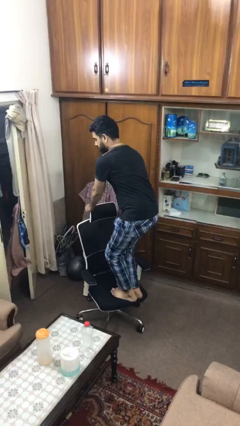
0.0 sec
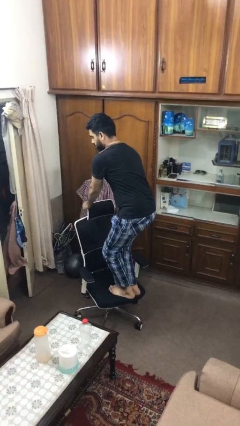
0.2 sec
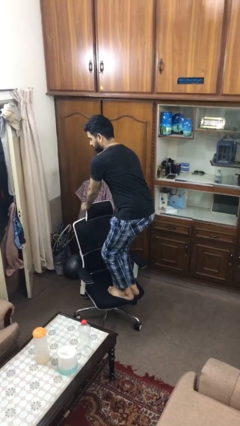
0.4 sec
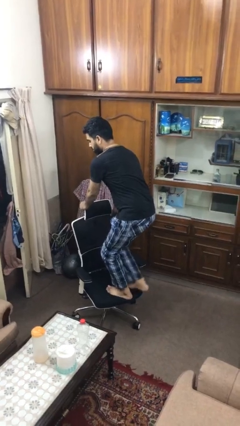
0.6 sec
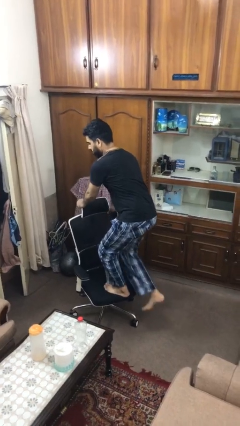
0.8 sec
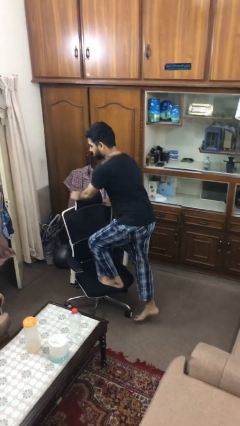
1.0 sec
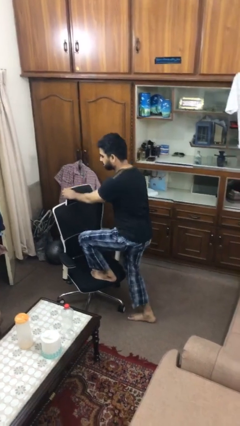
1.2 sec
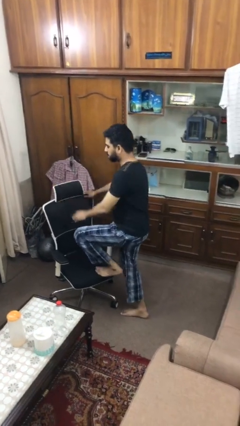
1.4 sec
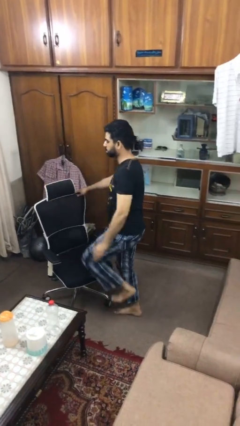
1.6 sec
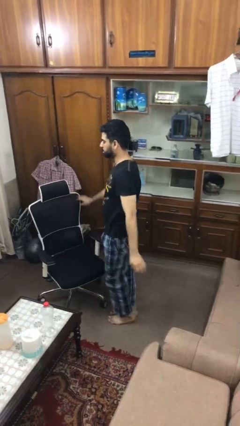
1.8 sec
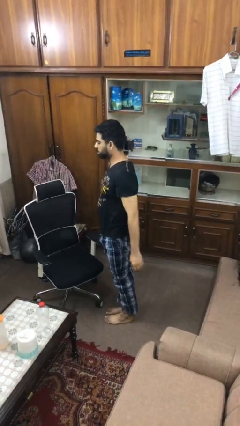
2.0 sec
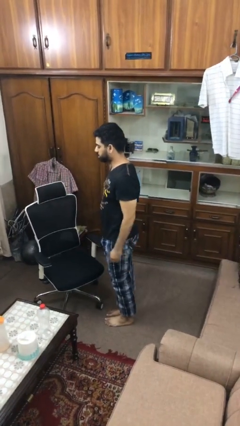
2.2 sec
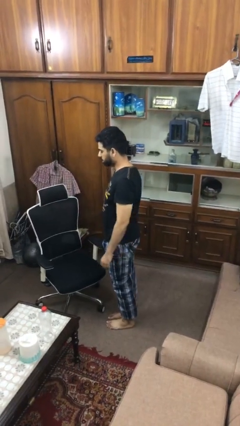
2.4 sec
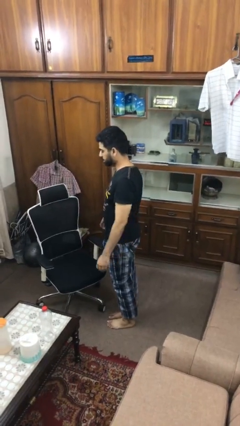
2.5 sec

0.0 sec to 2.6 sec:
person climbs off chair

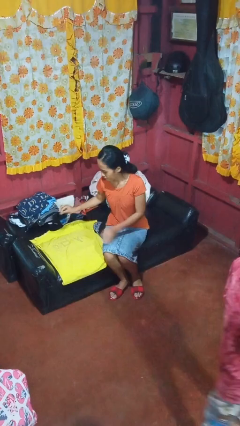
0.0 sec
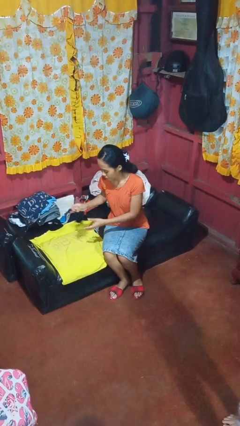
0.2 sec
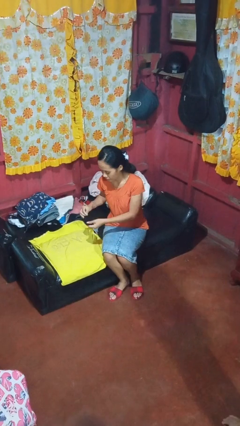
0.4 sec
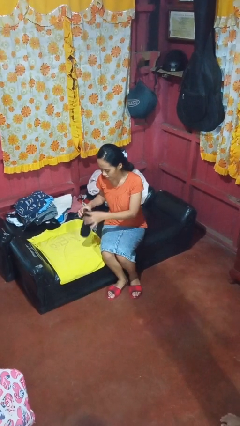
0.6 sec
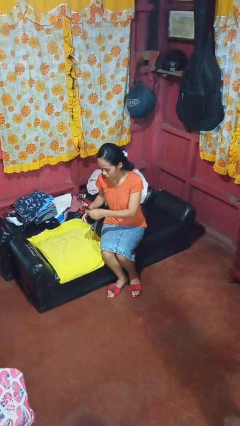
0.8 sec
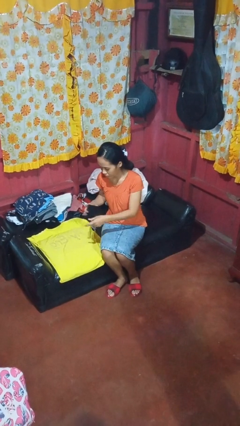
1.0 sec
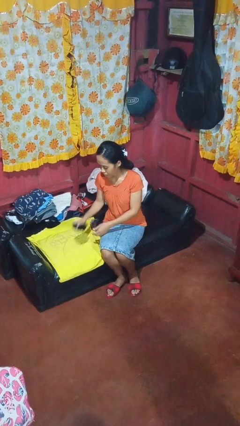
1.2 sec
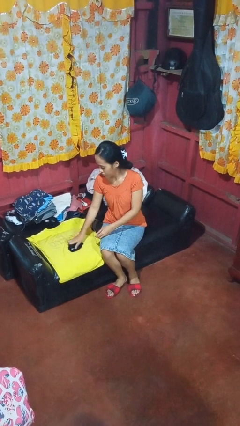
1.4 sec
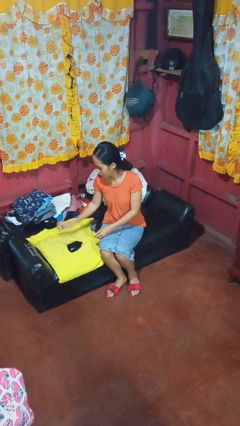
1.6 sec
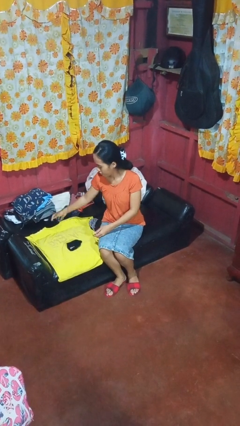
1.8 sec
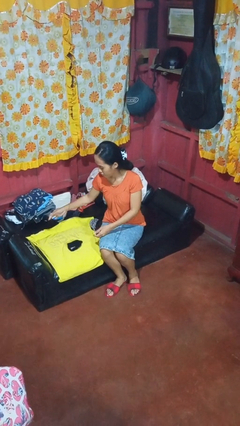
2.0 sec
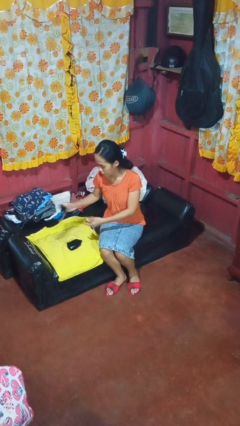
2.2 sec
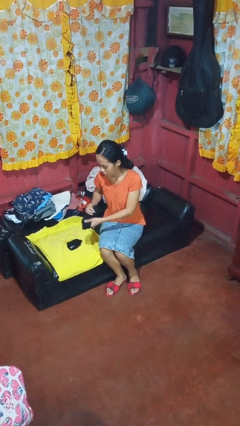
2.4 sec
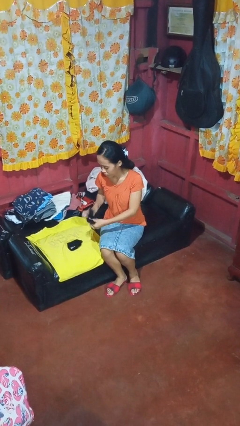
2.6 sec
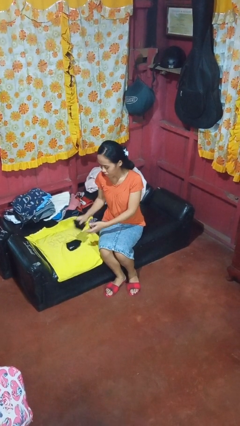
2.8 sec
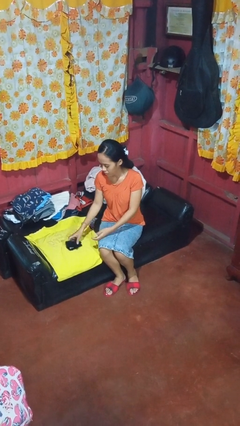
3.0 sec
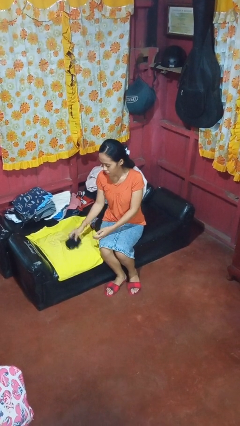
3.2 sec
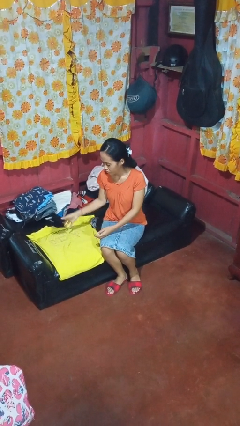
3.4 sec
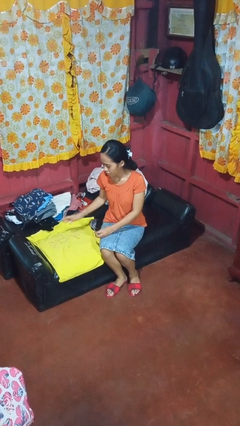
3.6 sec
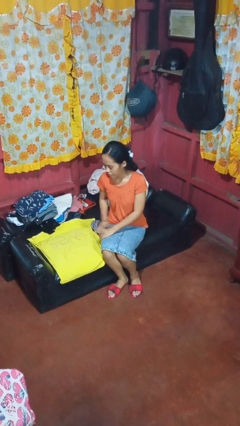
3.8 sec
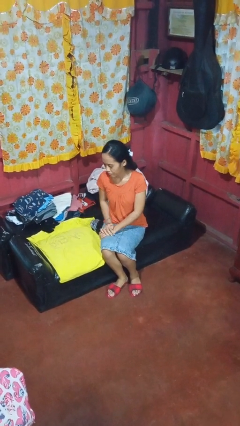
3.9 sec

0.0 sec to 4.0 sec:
person folds socks

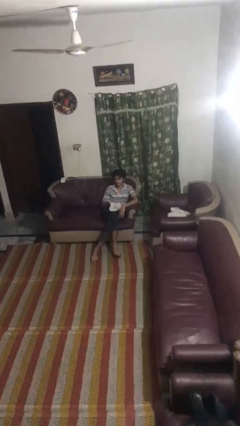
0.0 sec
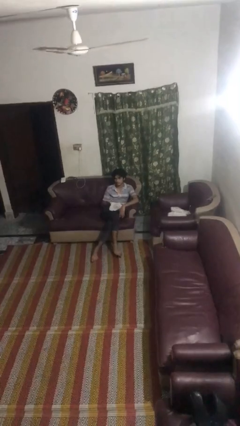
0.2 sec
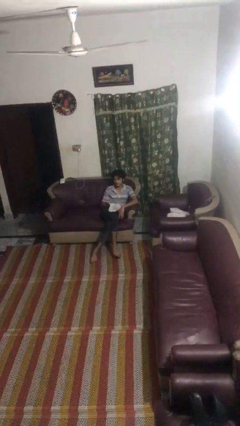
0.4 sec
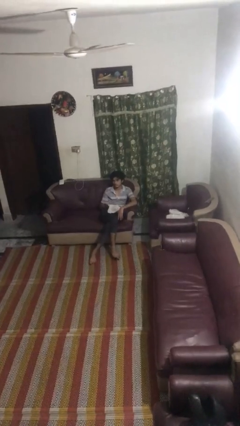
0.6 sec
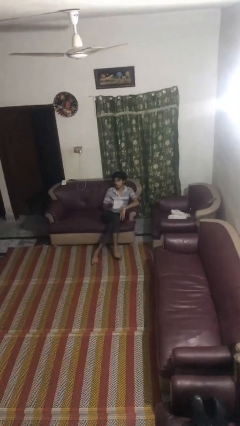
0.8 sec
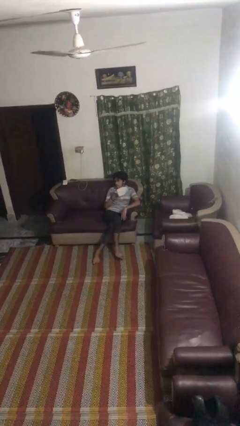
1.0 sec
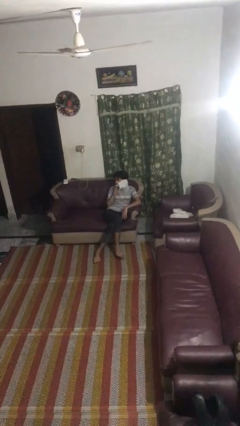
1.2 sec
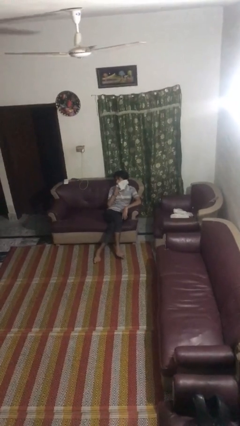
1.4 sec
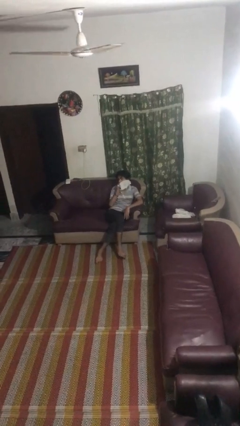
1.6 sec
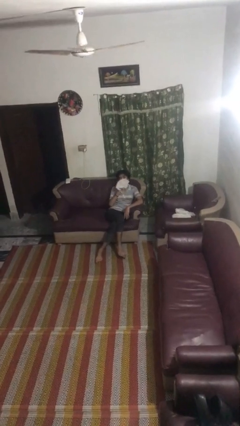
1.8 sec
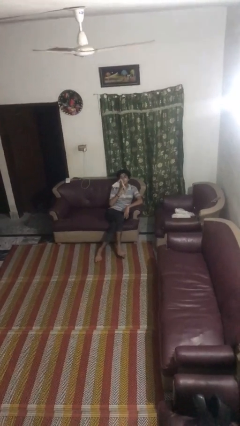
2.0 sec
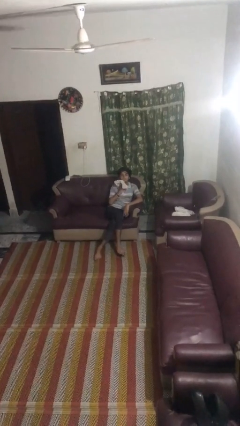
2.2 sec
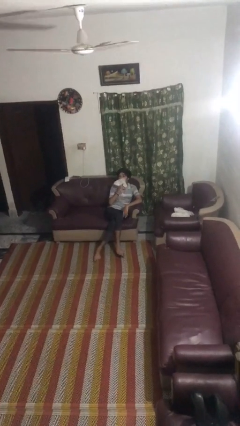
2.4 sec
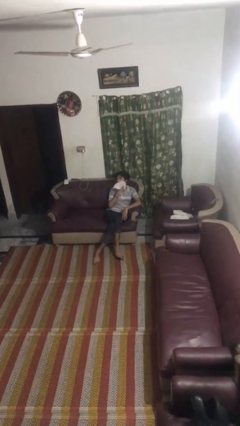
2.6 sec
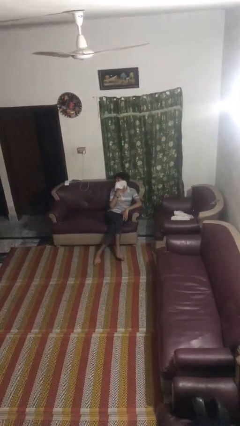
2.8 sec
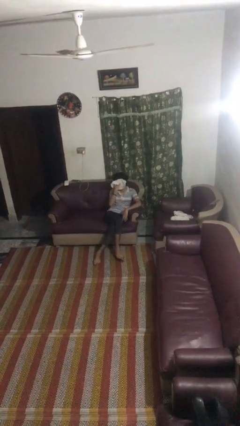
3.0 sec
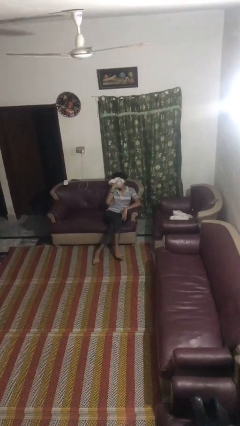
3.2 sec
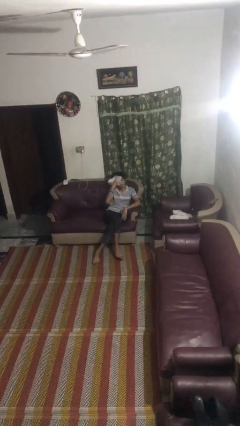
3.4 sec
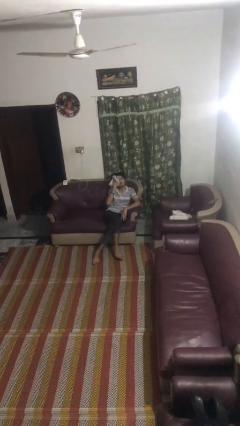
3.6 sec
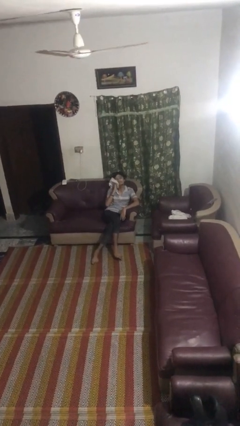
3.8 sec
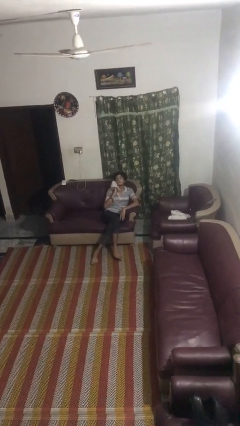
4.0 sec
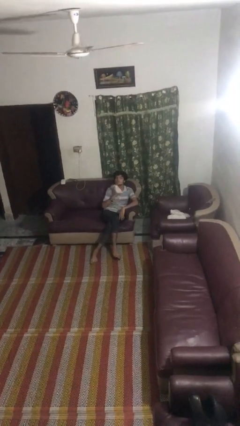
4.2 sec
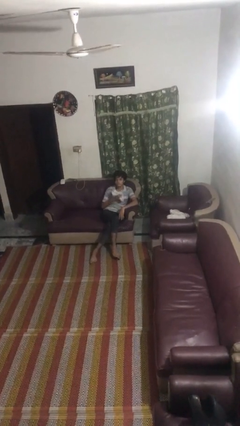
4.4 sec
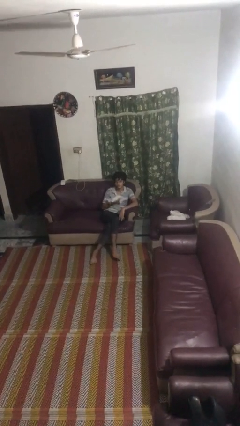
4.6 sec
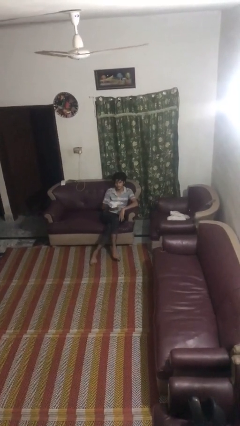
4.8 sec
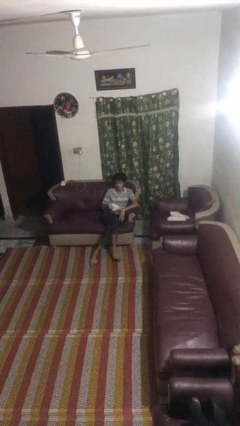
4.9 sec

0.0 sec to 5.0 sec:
person wipes mouth with napkin

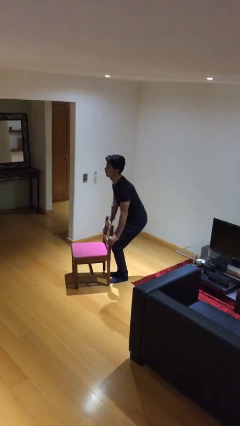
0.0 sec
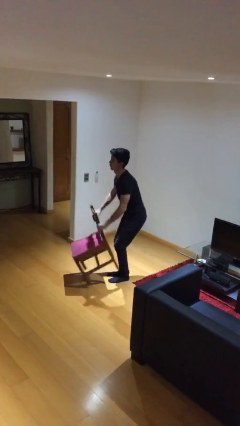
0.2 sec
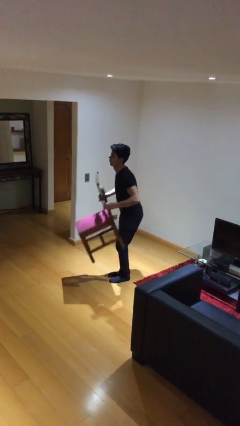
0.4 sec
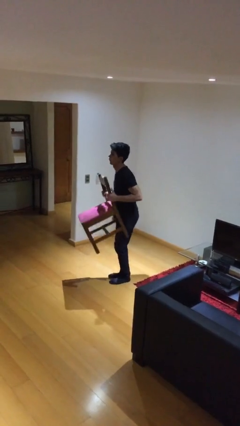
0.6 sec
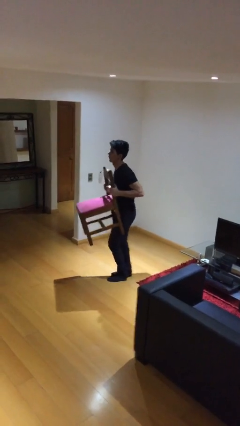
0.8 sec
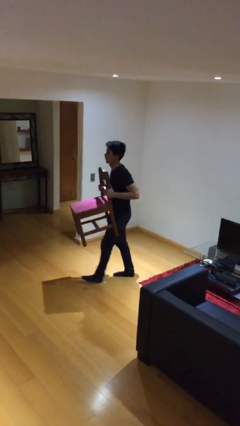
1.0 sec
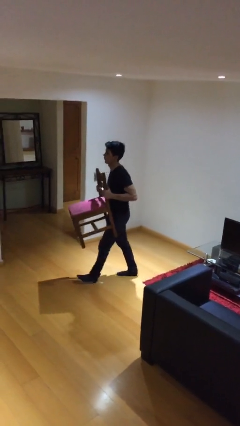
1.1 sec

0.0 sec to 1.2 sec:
person picks up object from floor

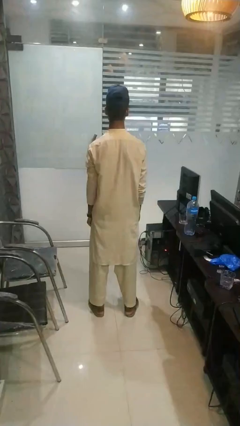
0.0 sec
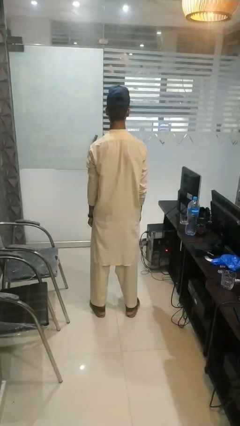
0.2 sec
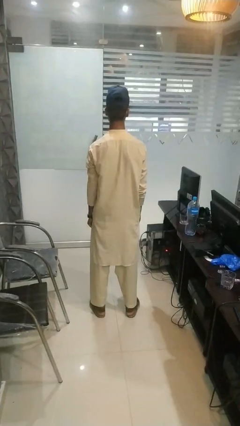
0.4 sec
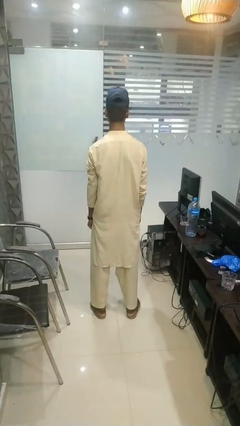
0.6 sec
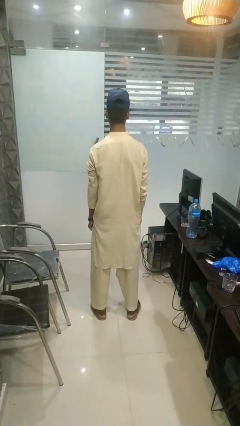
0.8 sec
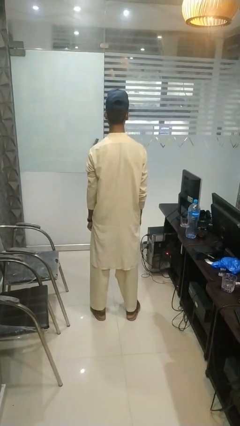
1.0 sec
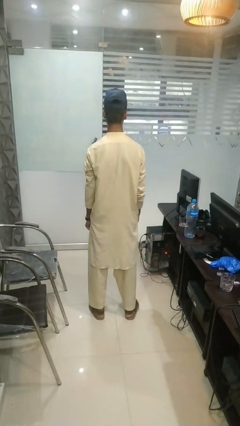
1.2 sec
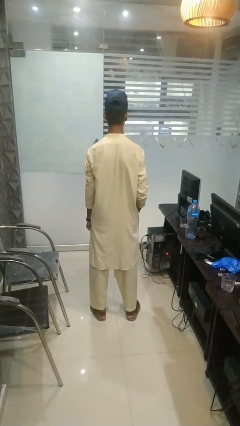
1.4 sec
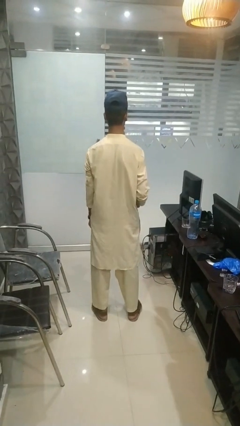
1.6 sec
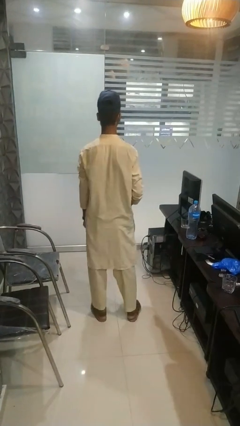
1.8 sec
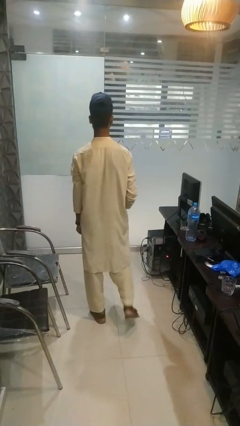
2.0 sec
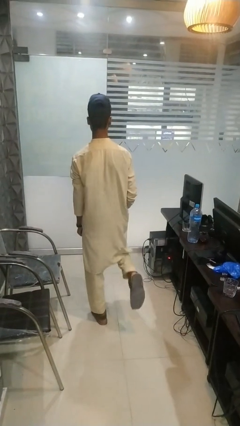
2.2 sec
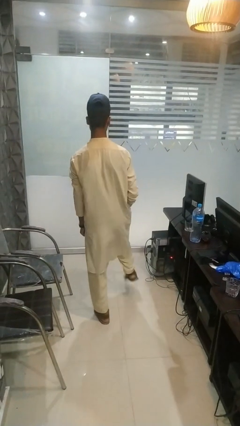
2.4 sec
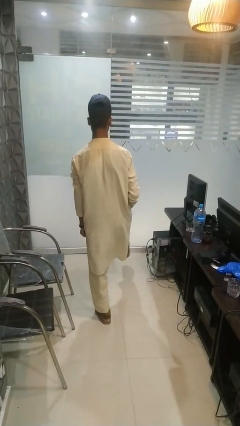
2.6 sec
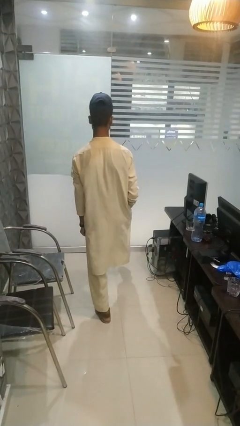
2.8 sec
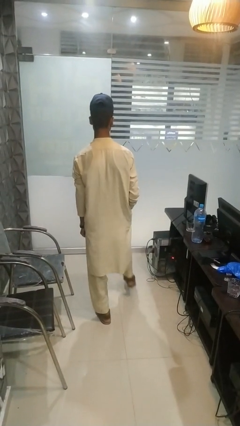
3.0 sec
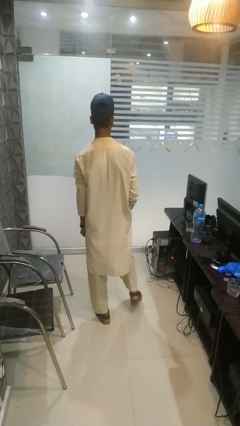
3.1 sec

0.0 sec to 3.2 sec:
person karate kicks

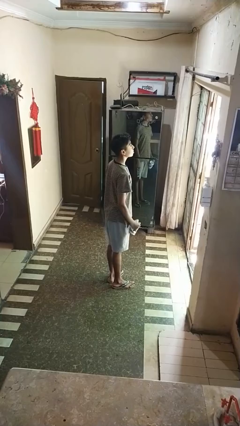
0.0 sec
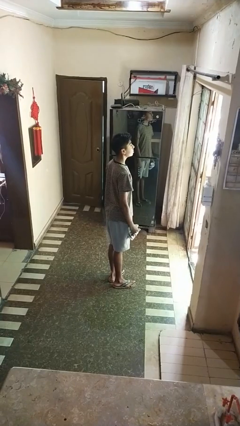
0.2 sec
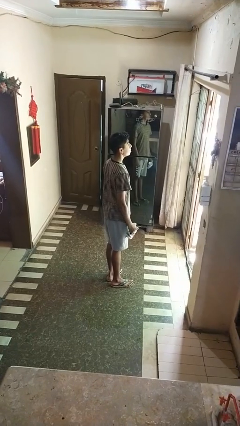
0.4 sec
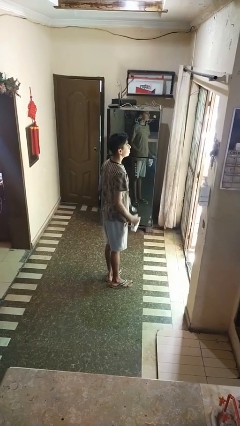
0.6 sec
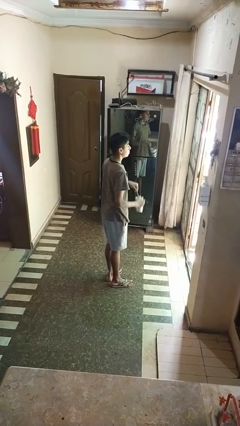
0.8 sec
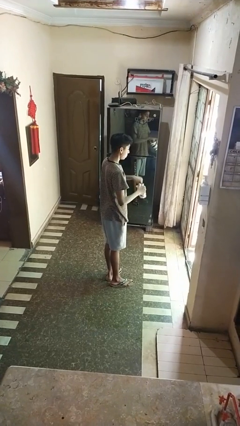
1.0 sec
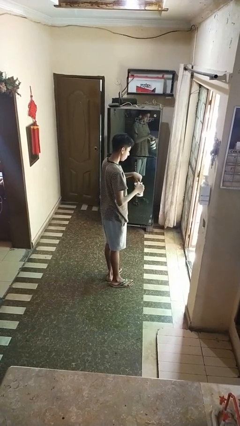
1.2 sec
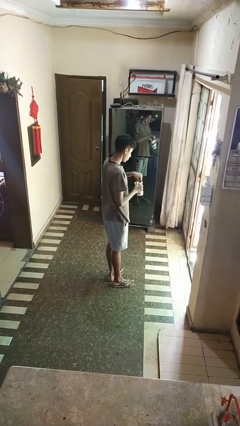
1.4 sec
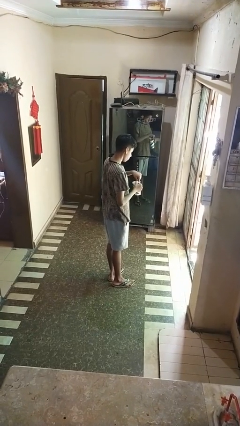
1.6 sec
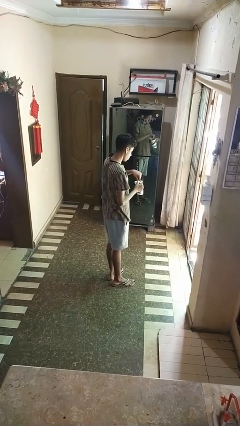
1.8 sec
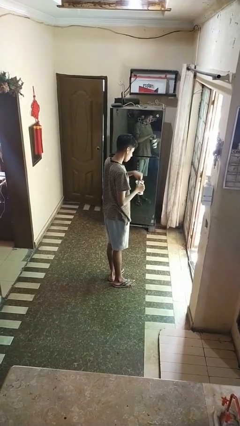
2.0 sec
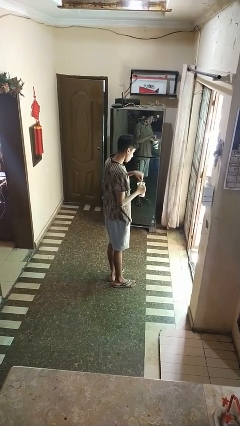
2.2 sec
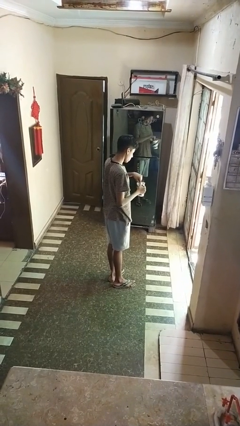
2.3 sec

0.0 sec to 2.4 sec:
person stirs mug
